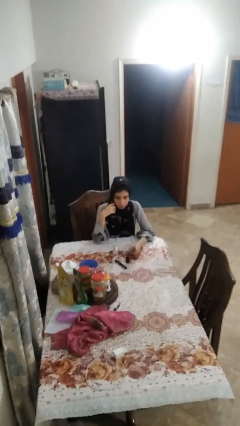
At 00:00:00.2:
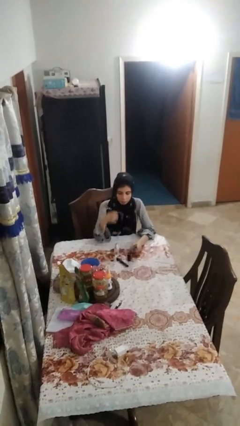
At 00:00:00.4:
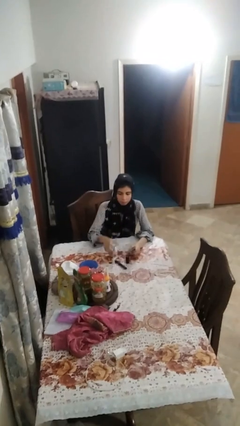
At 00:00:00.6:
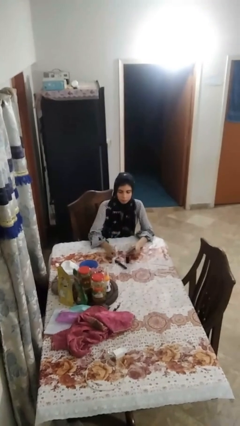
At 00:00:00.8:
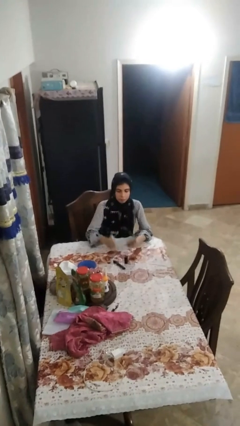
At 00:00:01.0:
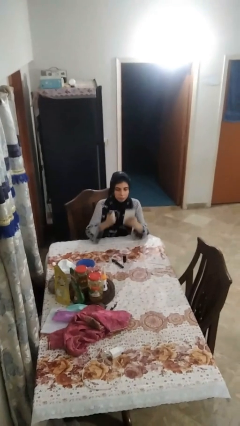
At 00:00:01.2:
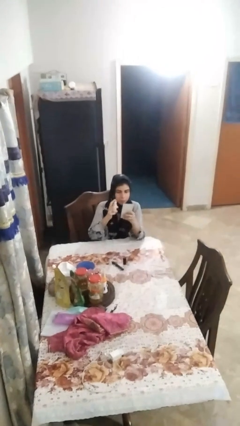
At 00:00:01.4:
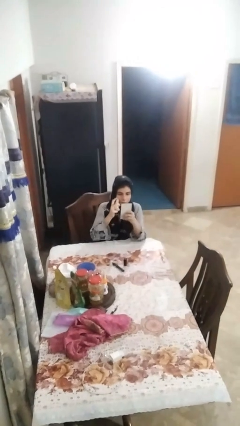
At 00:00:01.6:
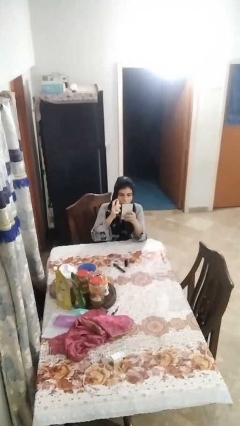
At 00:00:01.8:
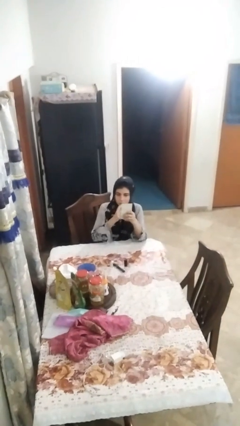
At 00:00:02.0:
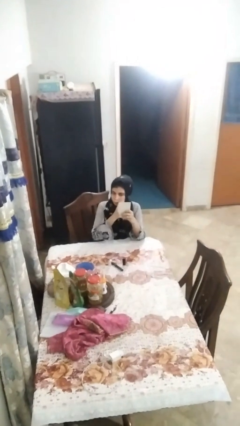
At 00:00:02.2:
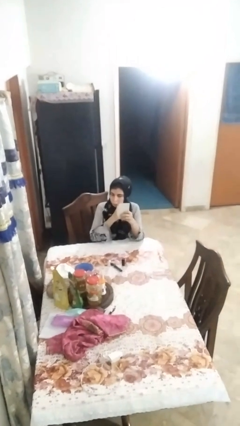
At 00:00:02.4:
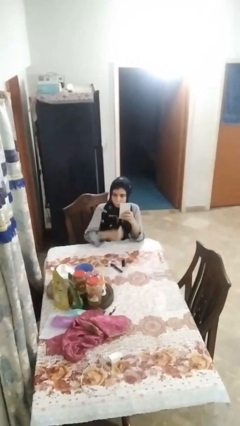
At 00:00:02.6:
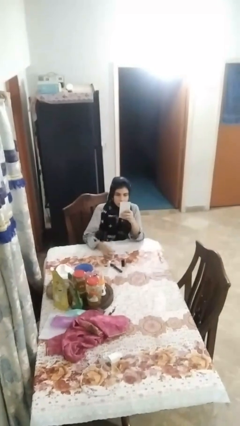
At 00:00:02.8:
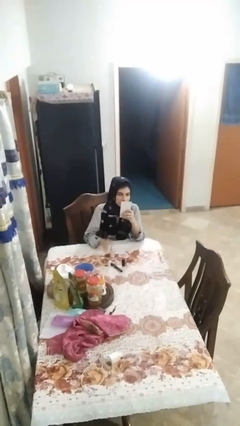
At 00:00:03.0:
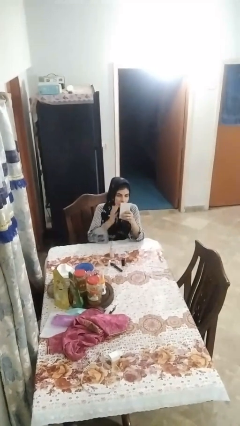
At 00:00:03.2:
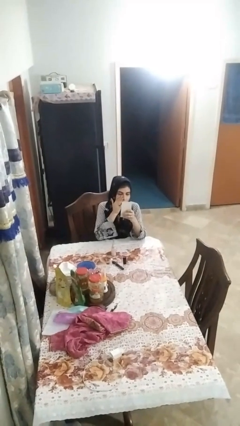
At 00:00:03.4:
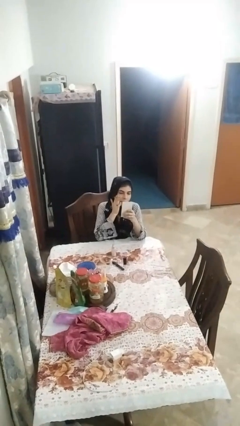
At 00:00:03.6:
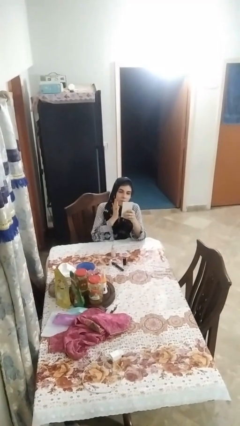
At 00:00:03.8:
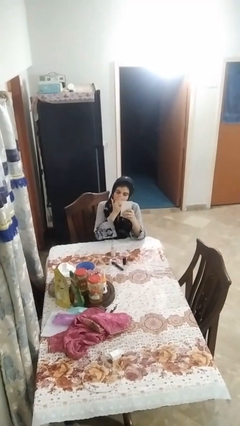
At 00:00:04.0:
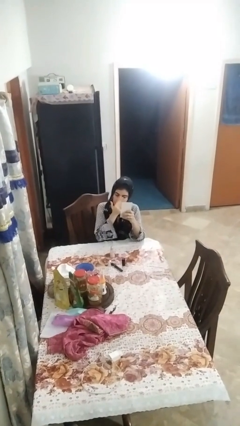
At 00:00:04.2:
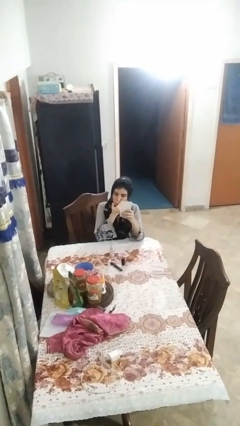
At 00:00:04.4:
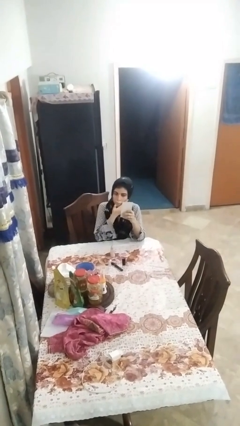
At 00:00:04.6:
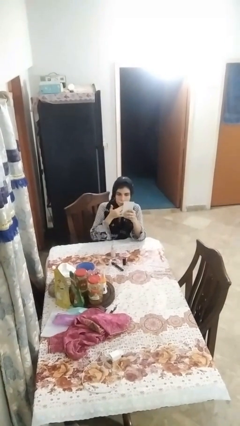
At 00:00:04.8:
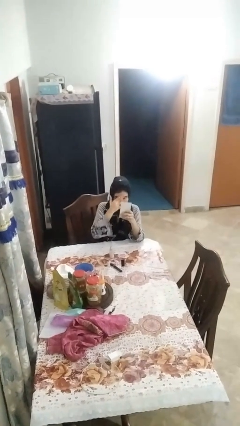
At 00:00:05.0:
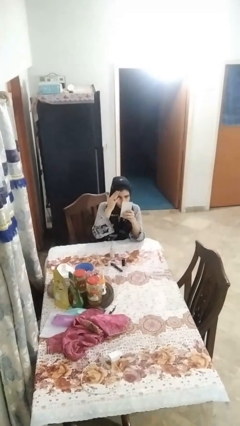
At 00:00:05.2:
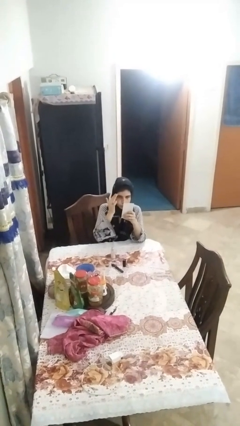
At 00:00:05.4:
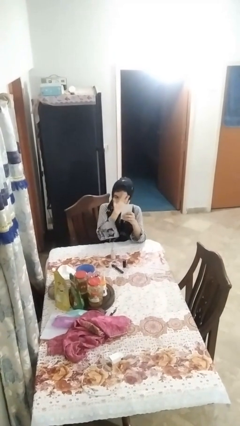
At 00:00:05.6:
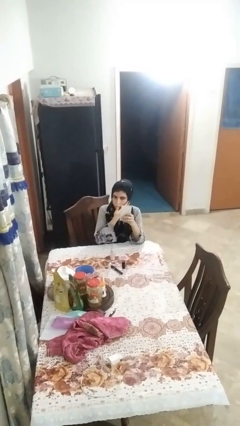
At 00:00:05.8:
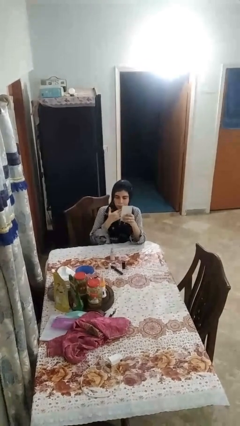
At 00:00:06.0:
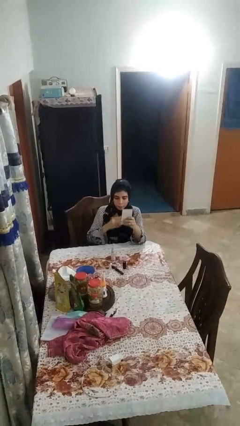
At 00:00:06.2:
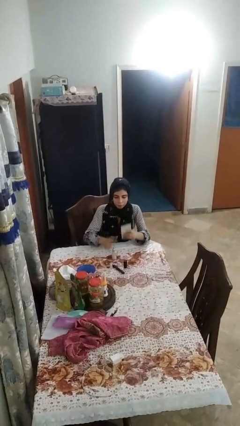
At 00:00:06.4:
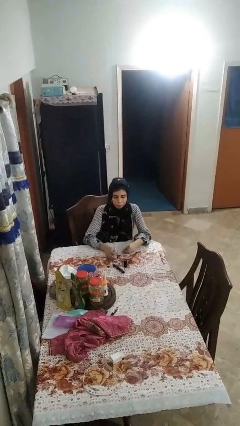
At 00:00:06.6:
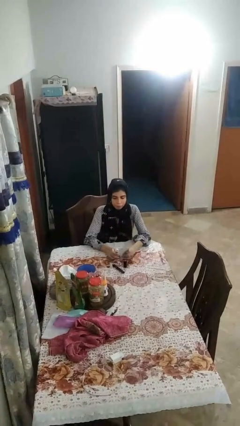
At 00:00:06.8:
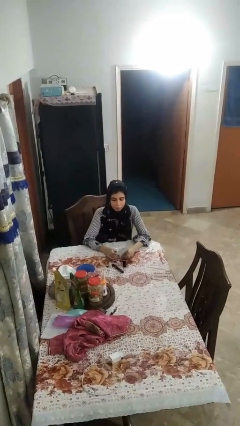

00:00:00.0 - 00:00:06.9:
person applies foundation makeup

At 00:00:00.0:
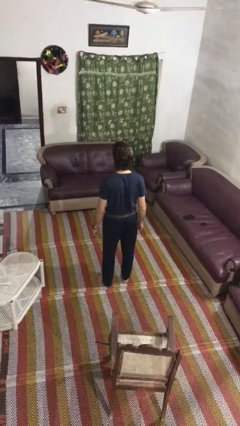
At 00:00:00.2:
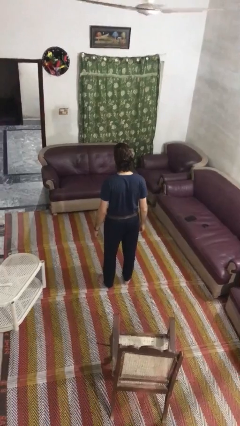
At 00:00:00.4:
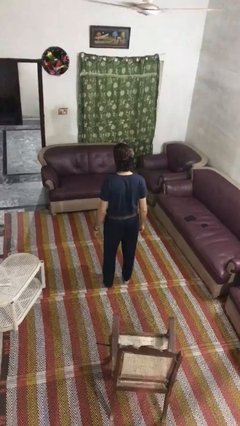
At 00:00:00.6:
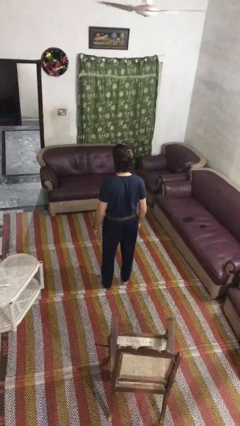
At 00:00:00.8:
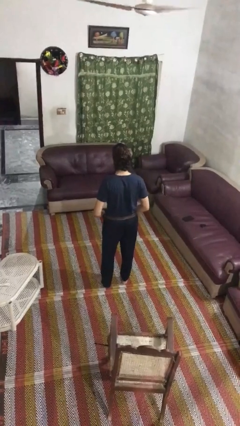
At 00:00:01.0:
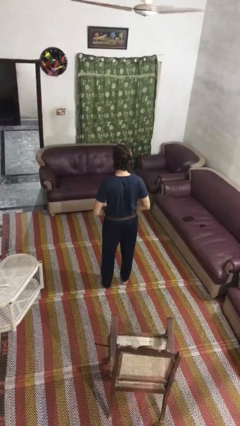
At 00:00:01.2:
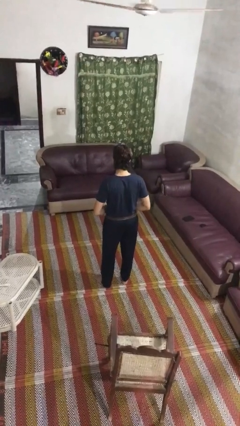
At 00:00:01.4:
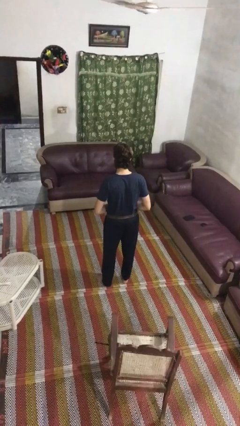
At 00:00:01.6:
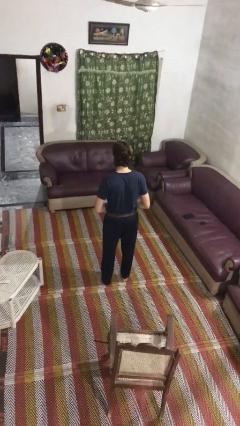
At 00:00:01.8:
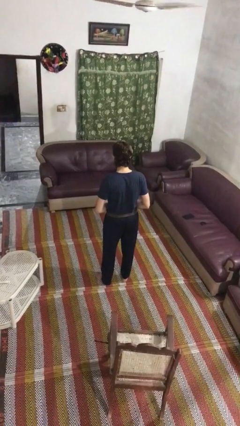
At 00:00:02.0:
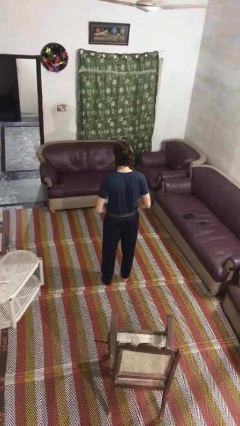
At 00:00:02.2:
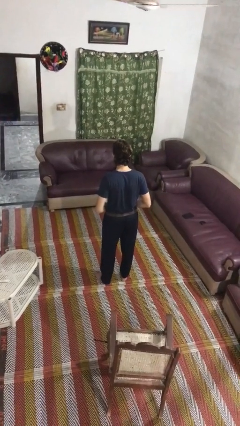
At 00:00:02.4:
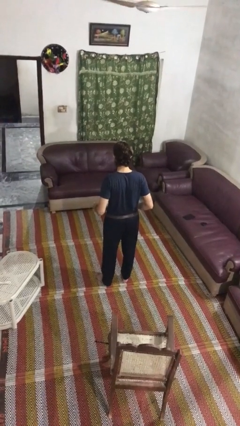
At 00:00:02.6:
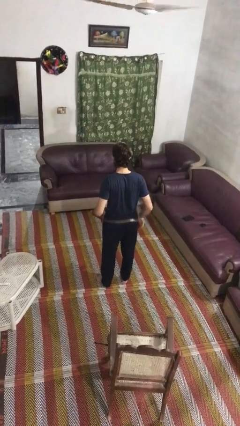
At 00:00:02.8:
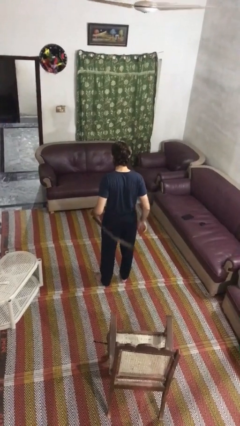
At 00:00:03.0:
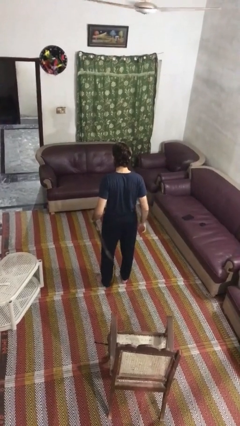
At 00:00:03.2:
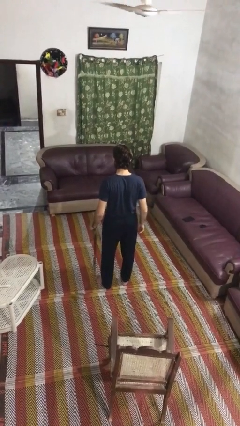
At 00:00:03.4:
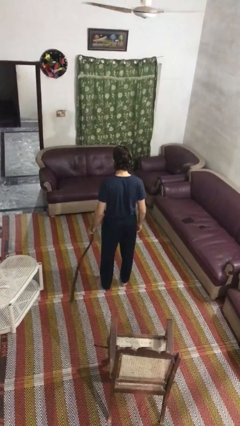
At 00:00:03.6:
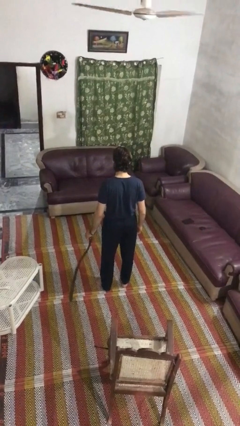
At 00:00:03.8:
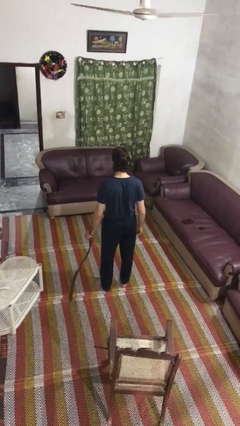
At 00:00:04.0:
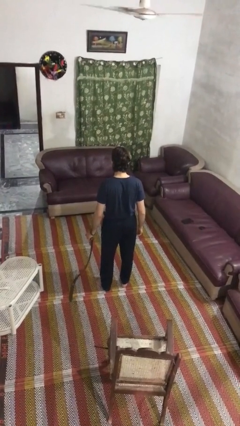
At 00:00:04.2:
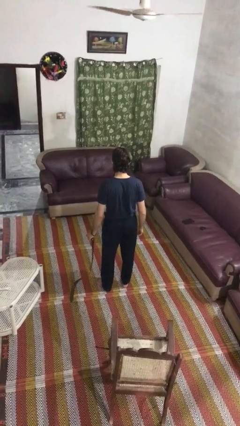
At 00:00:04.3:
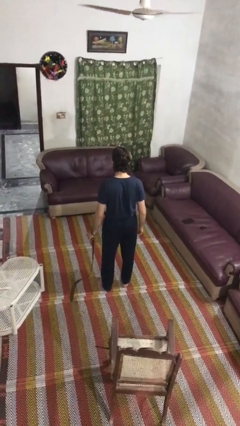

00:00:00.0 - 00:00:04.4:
person takes off belt

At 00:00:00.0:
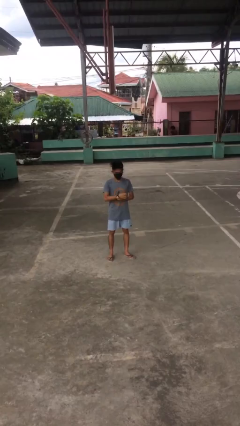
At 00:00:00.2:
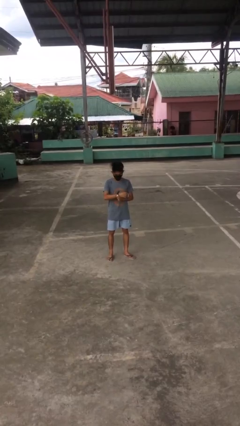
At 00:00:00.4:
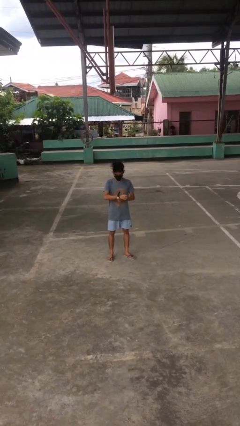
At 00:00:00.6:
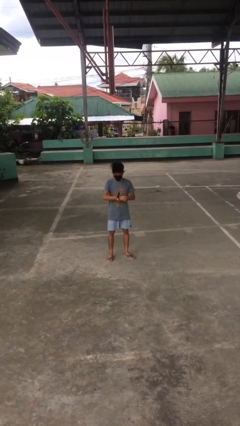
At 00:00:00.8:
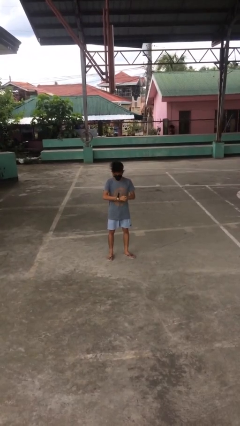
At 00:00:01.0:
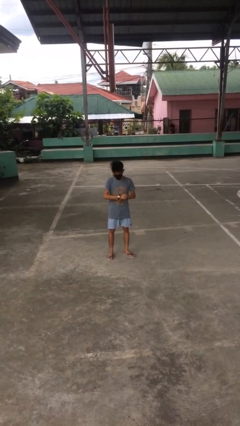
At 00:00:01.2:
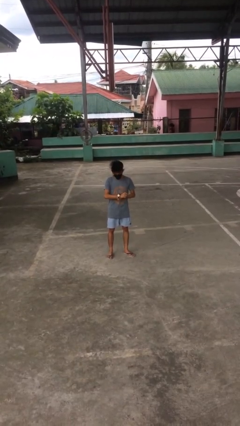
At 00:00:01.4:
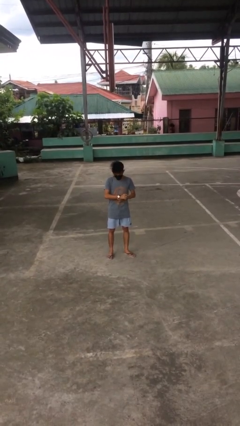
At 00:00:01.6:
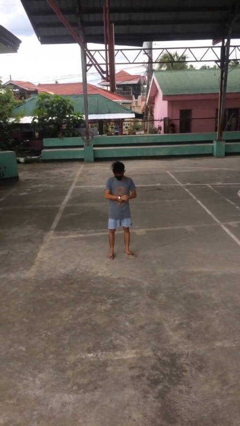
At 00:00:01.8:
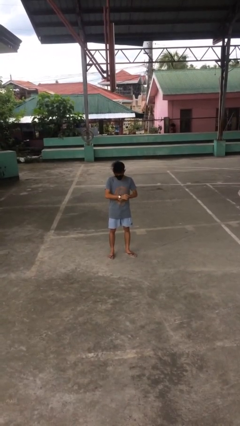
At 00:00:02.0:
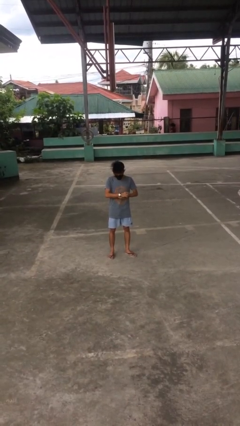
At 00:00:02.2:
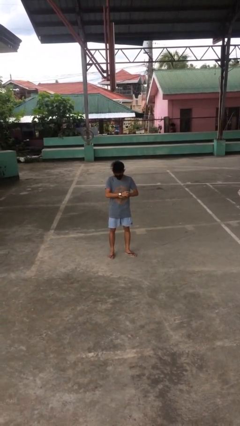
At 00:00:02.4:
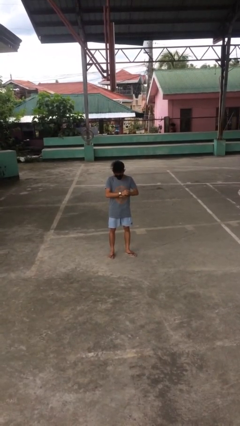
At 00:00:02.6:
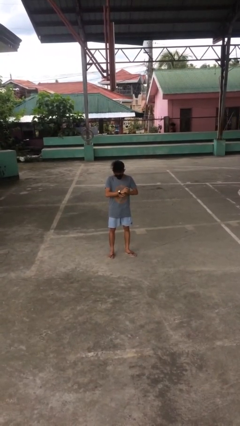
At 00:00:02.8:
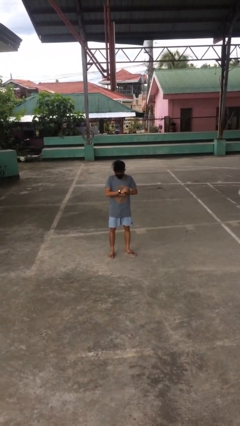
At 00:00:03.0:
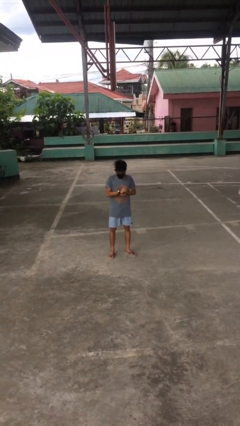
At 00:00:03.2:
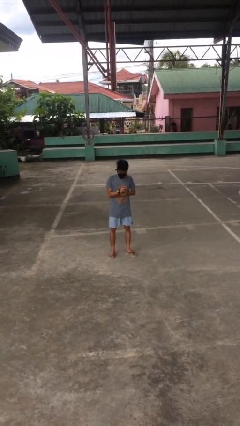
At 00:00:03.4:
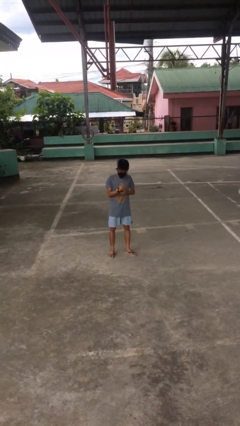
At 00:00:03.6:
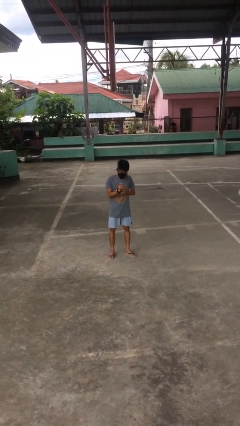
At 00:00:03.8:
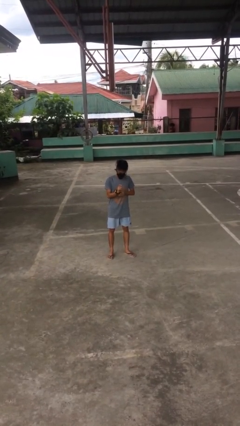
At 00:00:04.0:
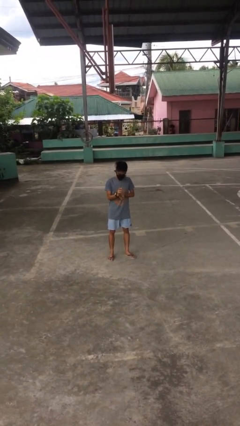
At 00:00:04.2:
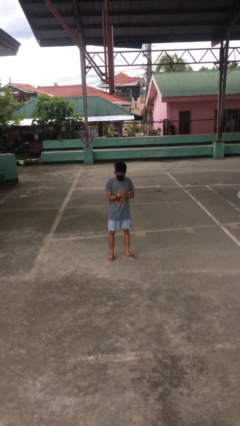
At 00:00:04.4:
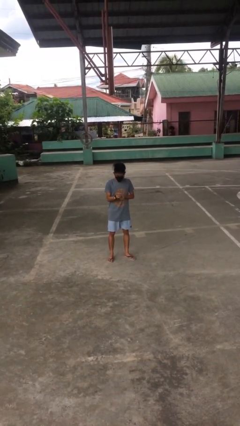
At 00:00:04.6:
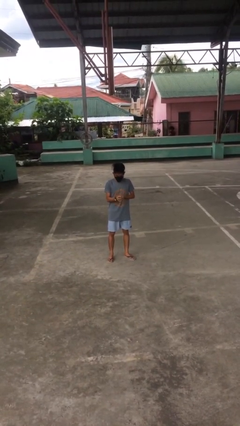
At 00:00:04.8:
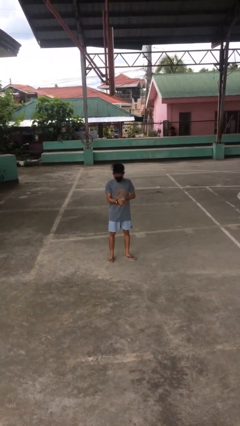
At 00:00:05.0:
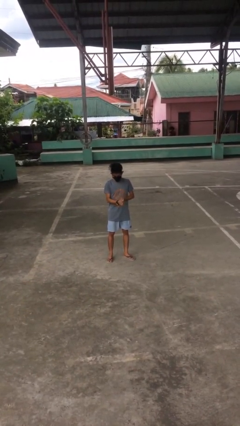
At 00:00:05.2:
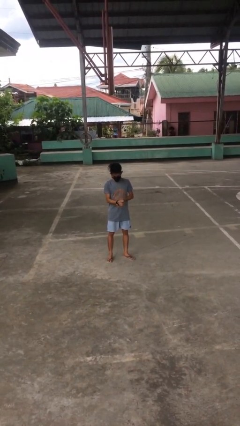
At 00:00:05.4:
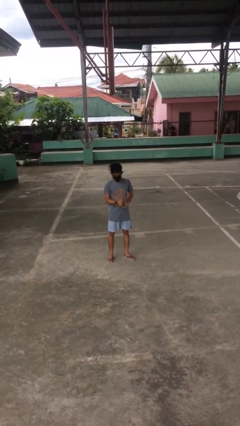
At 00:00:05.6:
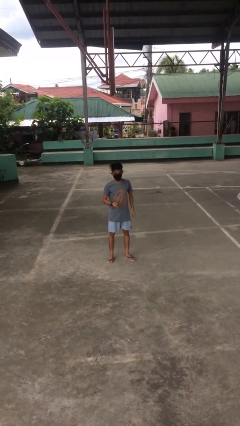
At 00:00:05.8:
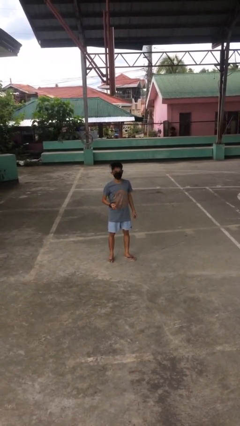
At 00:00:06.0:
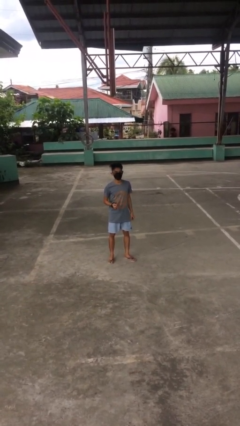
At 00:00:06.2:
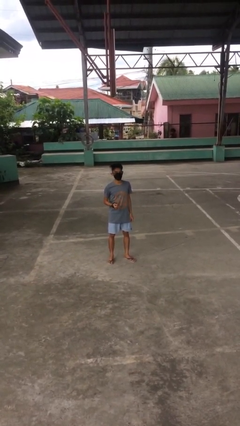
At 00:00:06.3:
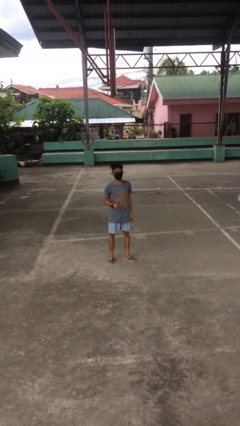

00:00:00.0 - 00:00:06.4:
person puts on wristwatch
